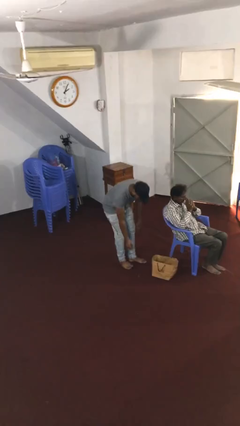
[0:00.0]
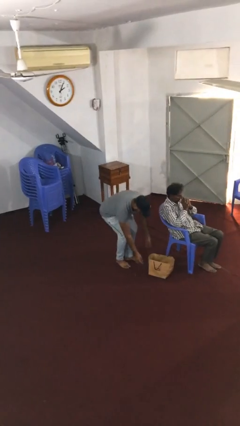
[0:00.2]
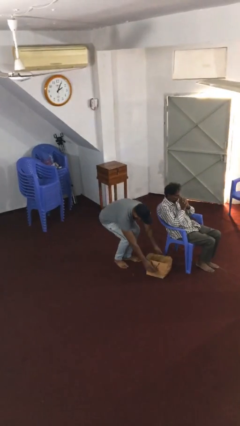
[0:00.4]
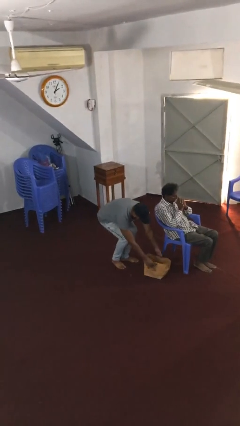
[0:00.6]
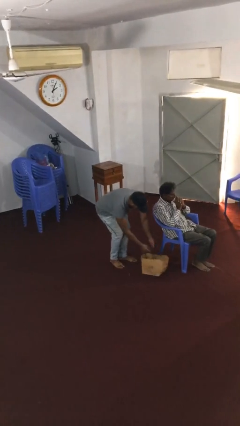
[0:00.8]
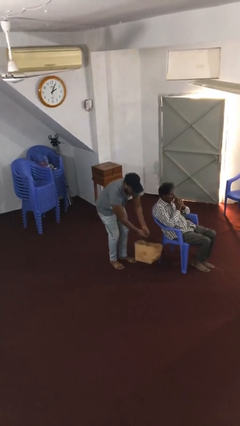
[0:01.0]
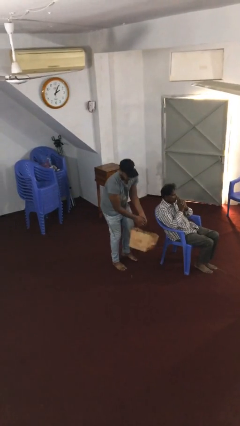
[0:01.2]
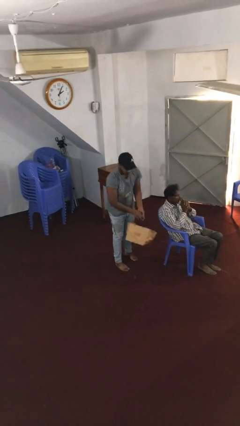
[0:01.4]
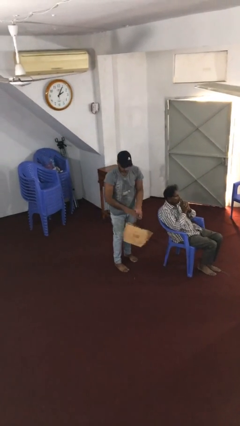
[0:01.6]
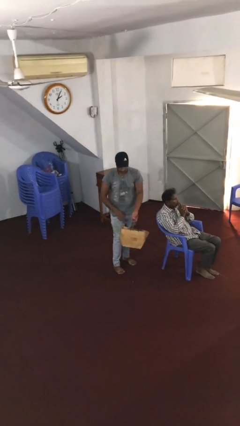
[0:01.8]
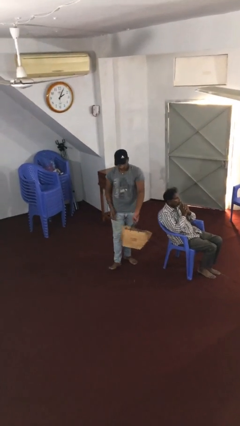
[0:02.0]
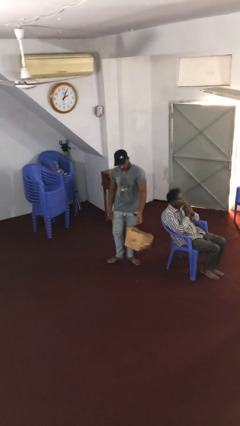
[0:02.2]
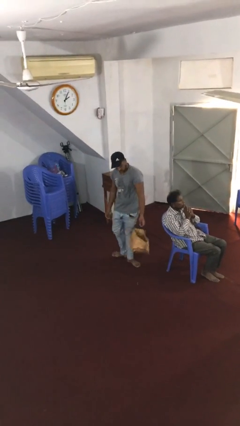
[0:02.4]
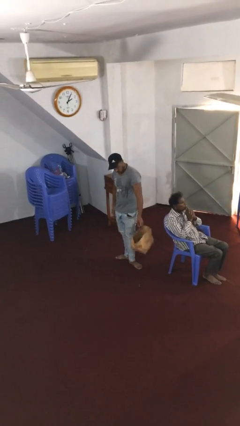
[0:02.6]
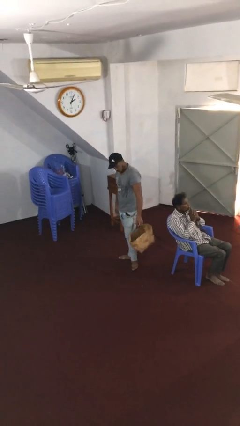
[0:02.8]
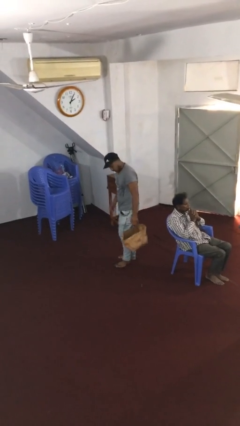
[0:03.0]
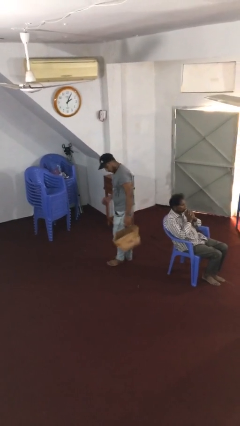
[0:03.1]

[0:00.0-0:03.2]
person steals object from person

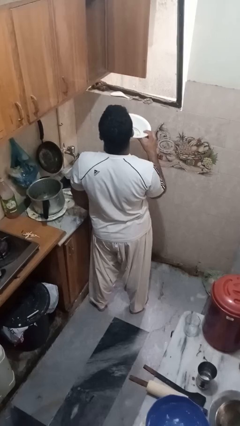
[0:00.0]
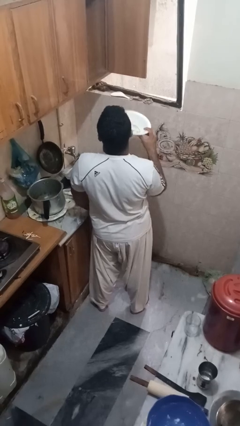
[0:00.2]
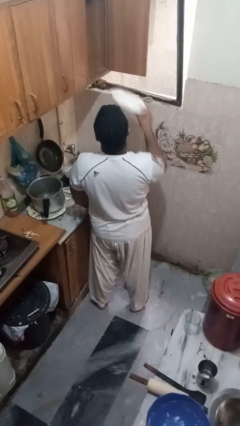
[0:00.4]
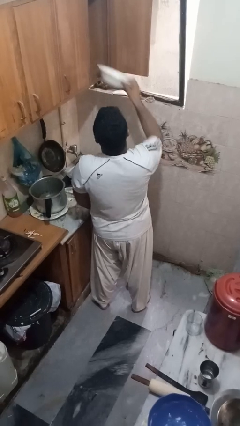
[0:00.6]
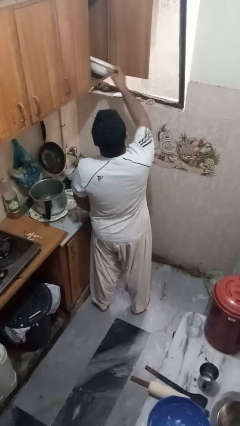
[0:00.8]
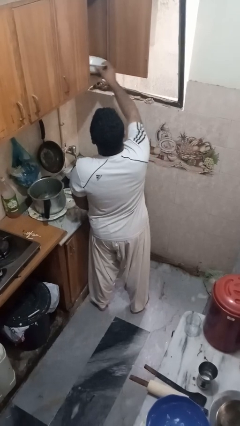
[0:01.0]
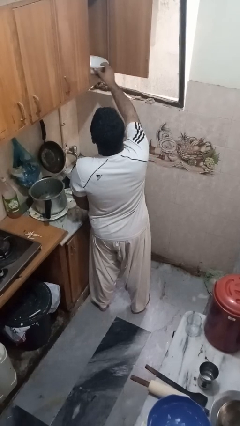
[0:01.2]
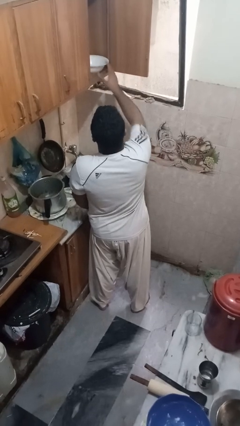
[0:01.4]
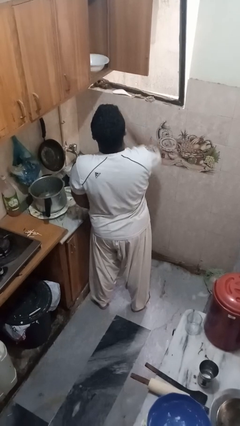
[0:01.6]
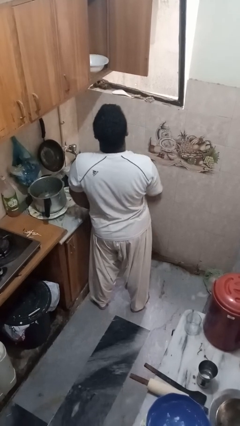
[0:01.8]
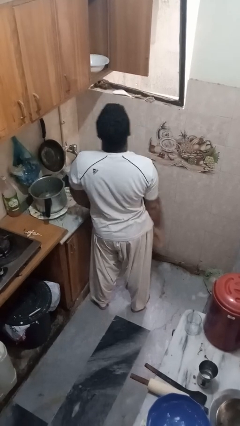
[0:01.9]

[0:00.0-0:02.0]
person puts object in cabinet

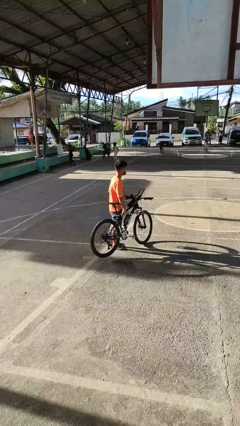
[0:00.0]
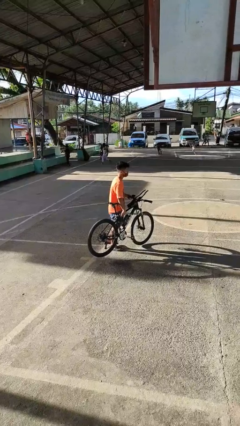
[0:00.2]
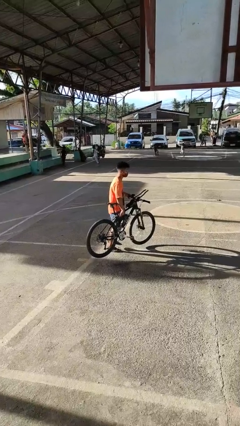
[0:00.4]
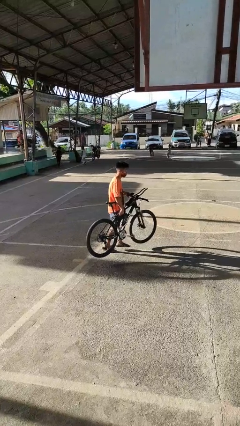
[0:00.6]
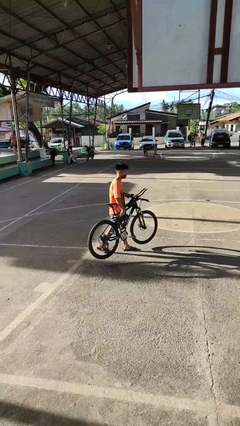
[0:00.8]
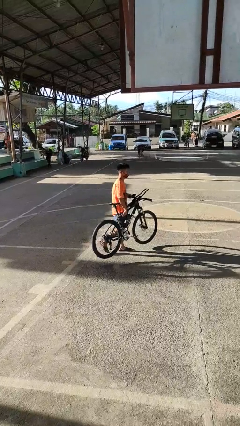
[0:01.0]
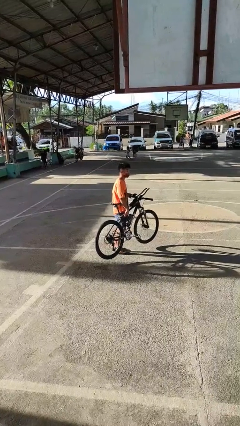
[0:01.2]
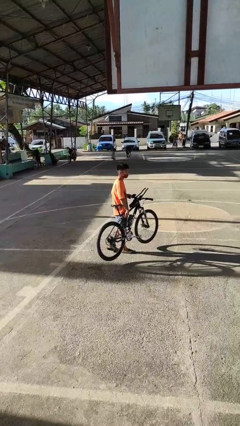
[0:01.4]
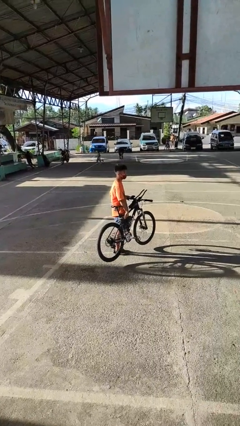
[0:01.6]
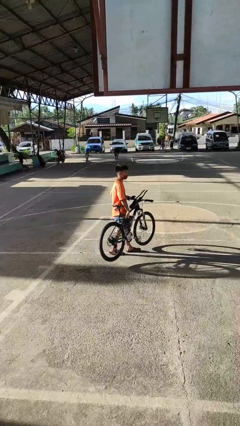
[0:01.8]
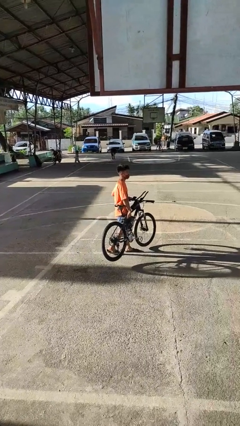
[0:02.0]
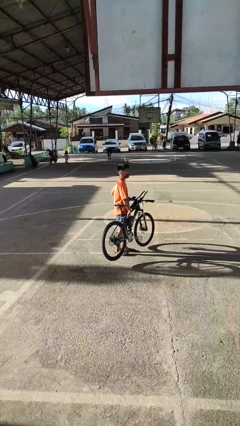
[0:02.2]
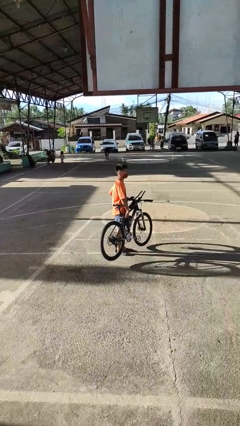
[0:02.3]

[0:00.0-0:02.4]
person carries bicycle

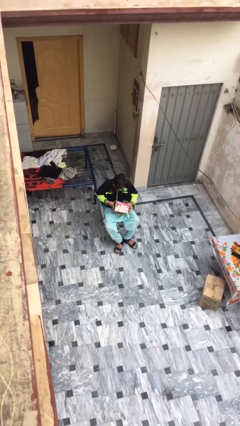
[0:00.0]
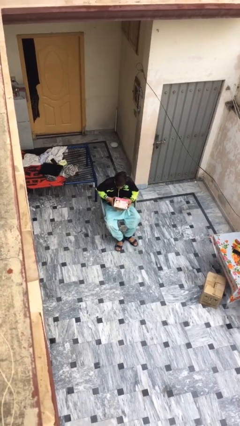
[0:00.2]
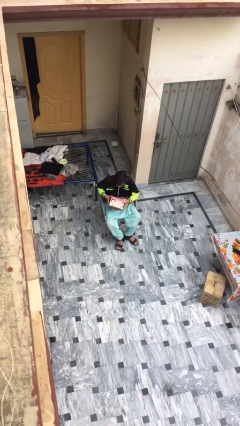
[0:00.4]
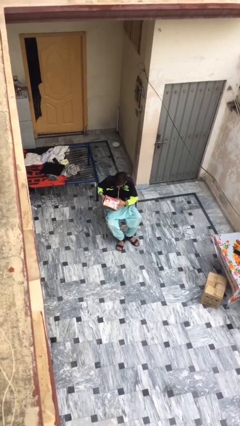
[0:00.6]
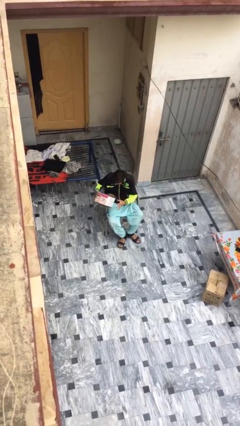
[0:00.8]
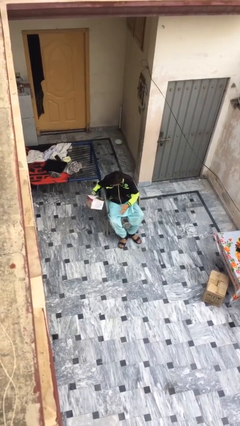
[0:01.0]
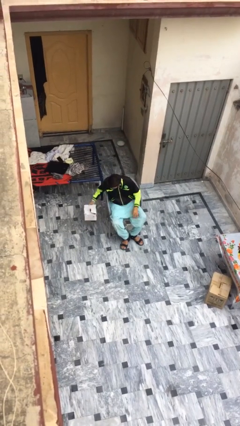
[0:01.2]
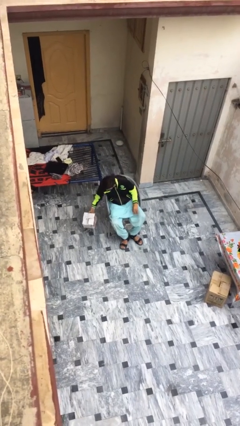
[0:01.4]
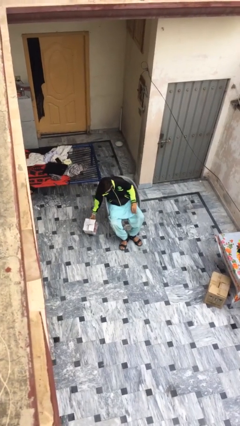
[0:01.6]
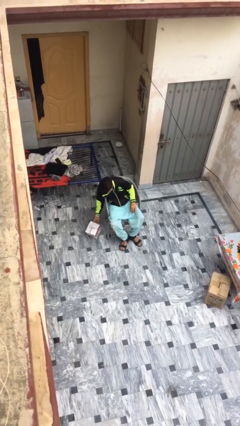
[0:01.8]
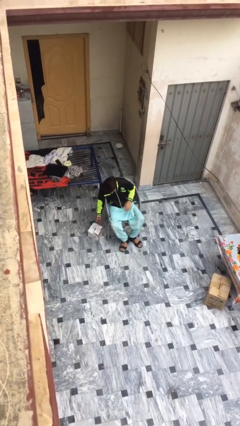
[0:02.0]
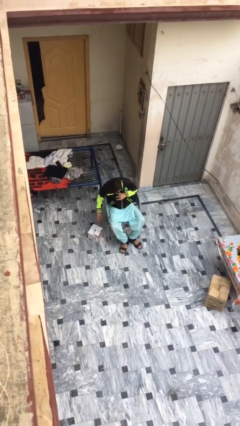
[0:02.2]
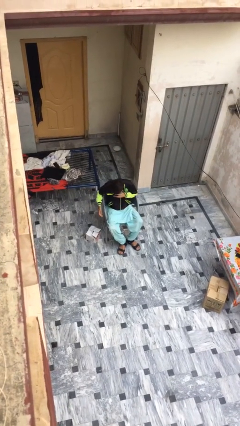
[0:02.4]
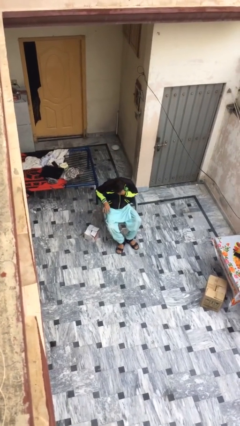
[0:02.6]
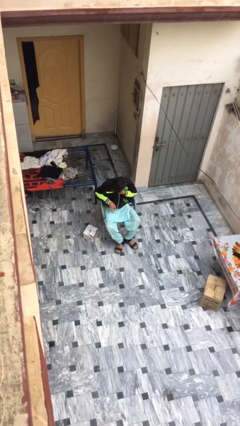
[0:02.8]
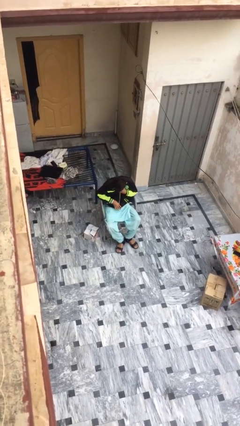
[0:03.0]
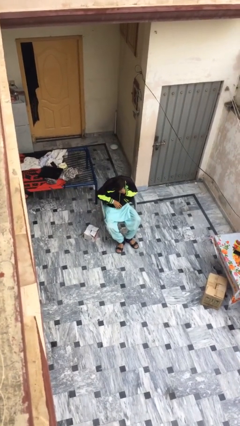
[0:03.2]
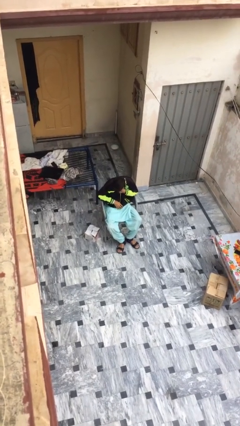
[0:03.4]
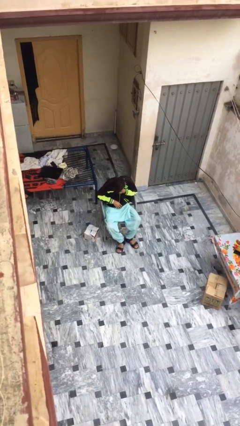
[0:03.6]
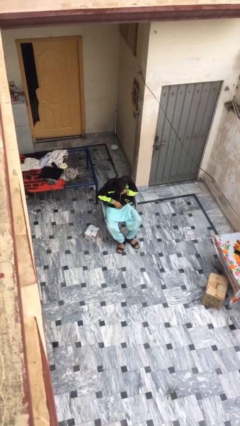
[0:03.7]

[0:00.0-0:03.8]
person puts down object on floor

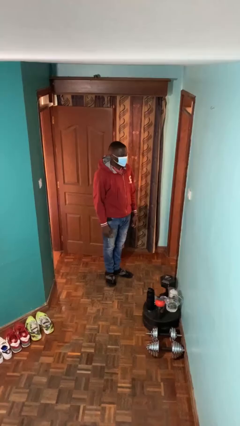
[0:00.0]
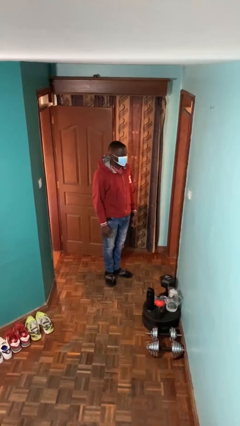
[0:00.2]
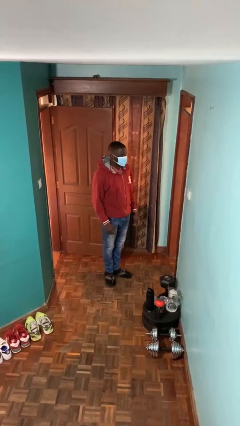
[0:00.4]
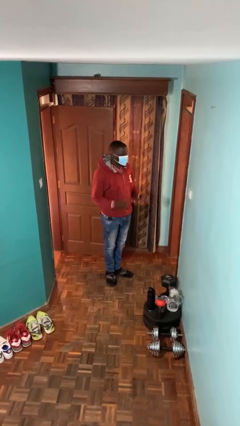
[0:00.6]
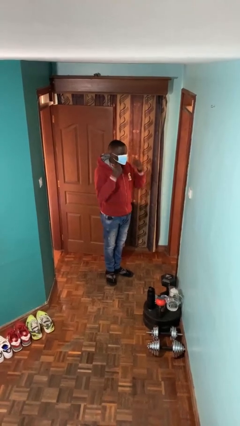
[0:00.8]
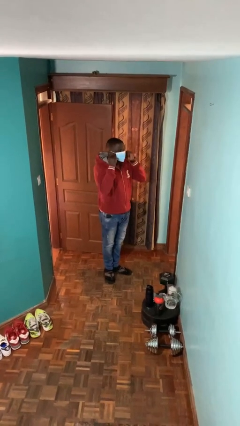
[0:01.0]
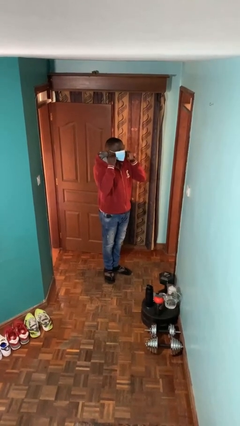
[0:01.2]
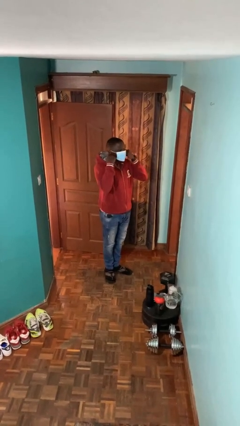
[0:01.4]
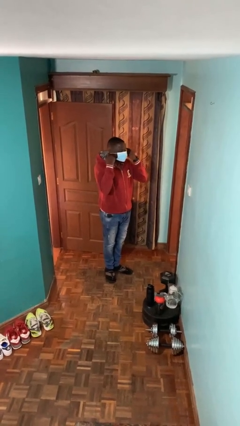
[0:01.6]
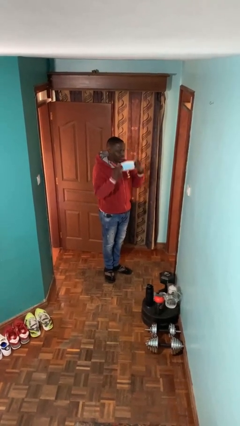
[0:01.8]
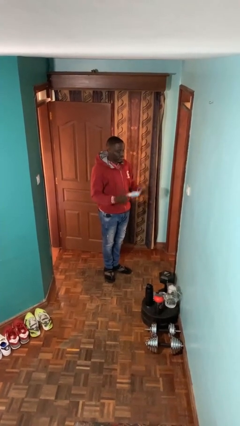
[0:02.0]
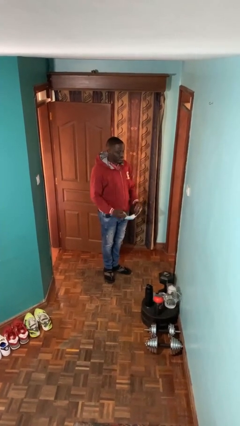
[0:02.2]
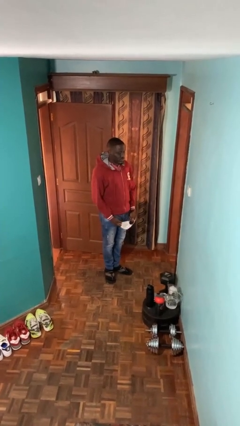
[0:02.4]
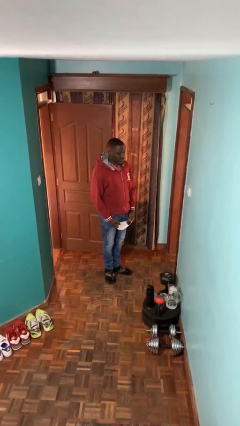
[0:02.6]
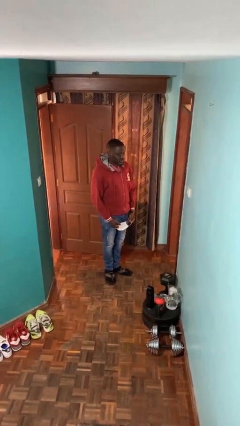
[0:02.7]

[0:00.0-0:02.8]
person takes off facemask

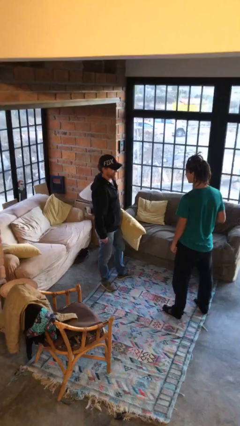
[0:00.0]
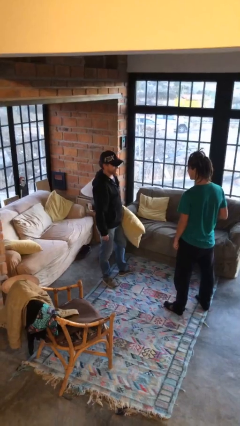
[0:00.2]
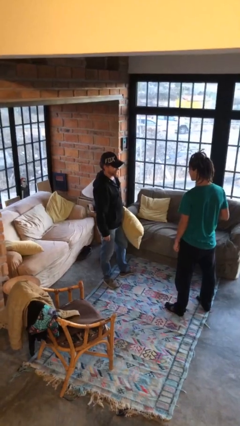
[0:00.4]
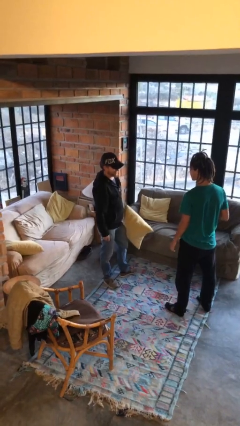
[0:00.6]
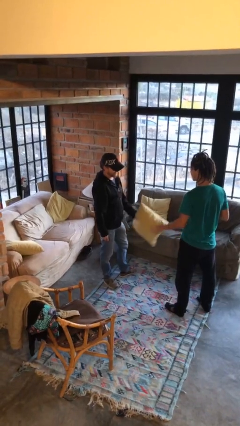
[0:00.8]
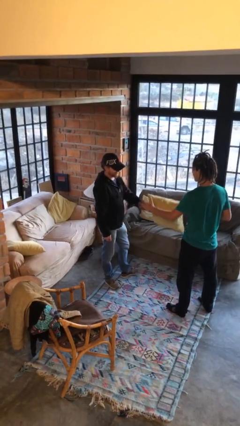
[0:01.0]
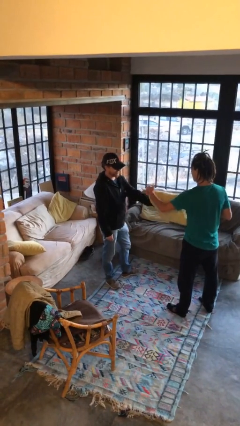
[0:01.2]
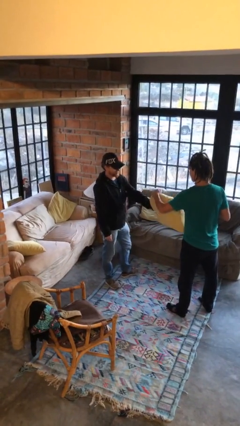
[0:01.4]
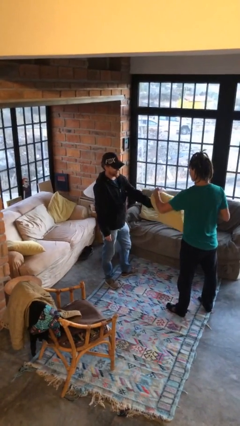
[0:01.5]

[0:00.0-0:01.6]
person transfers object to person

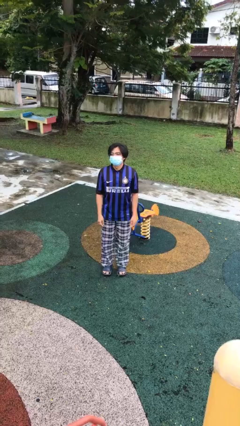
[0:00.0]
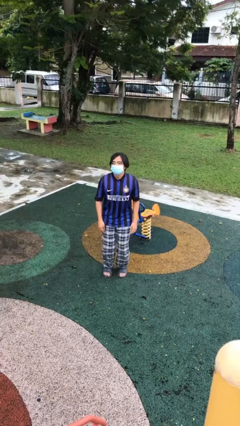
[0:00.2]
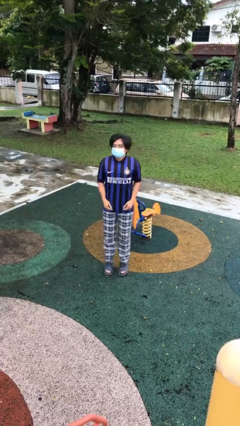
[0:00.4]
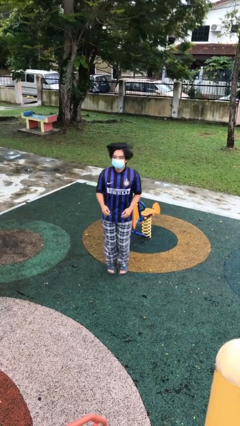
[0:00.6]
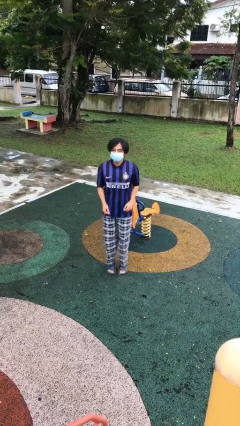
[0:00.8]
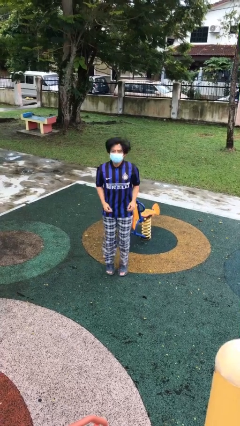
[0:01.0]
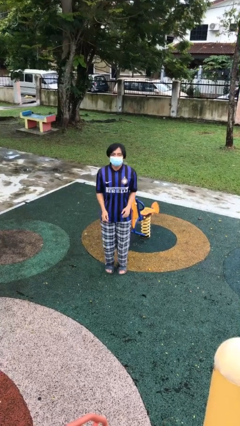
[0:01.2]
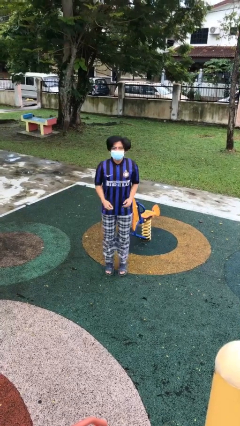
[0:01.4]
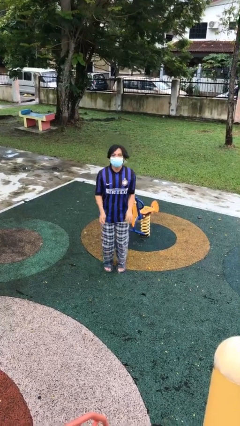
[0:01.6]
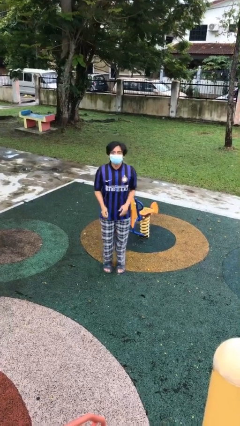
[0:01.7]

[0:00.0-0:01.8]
person jumps
